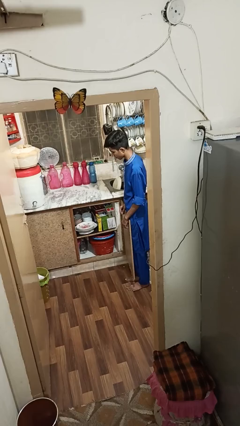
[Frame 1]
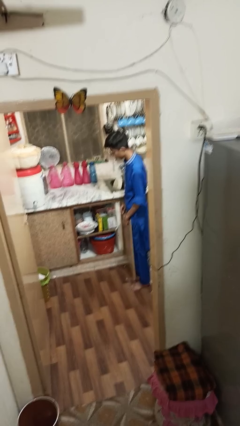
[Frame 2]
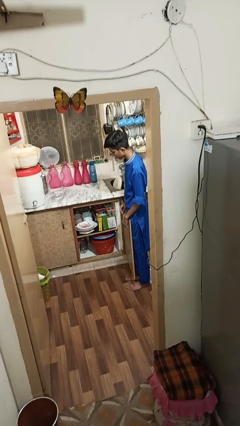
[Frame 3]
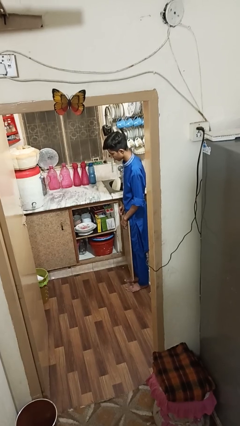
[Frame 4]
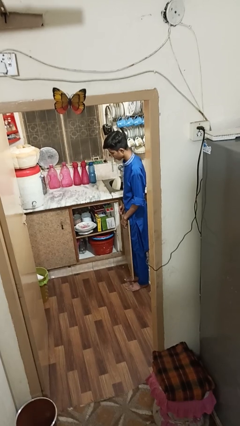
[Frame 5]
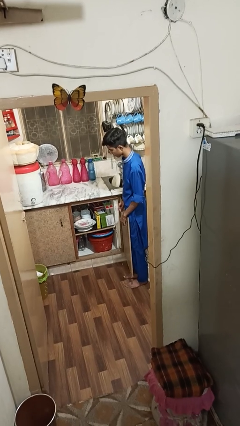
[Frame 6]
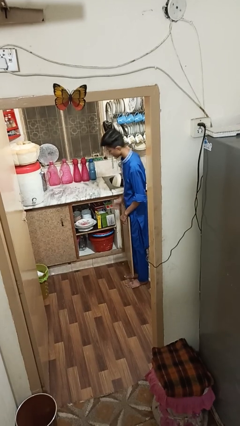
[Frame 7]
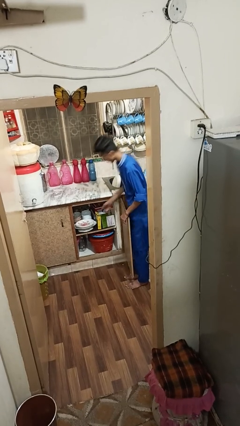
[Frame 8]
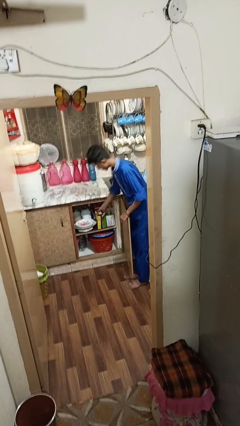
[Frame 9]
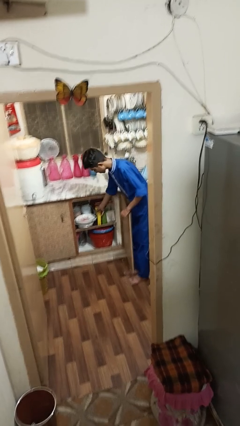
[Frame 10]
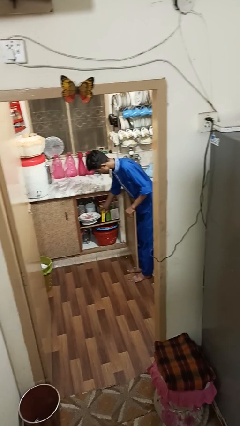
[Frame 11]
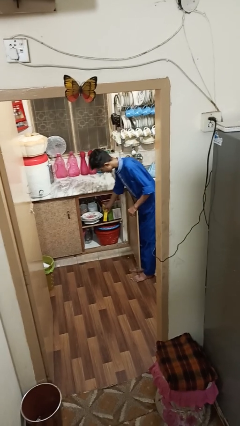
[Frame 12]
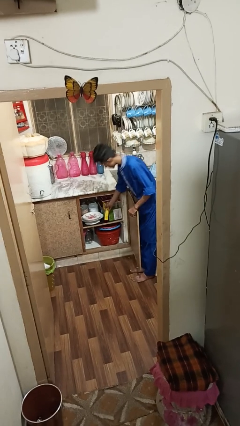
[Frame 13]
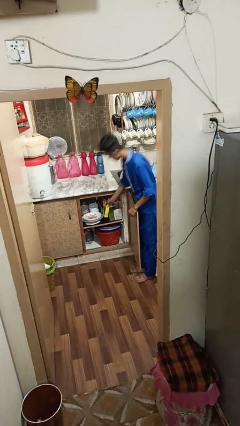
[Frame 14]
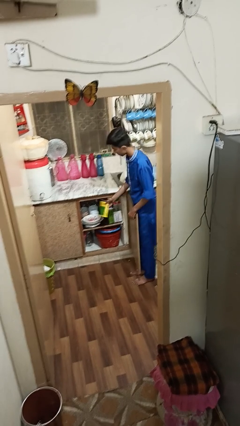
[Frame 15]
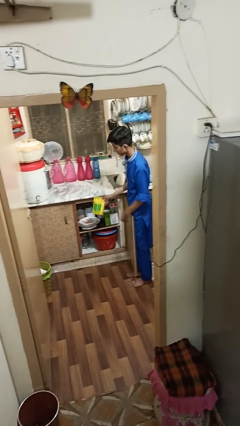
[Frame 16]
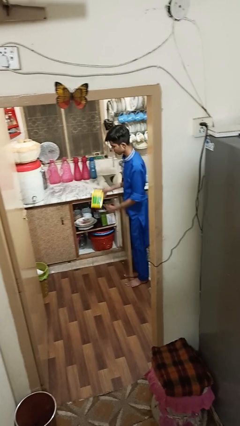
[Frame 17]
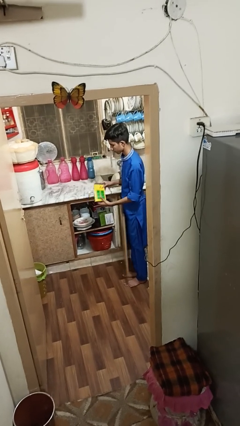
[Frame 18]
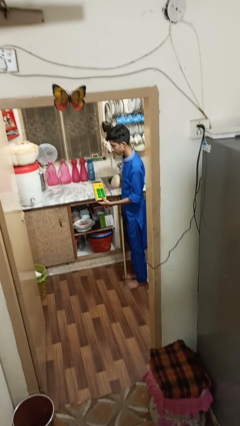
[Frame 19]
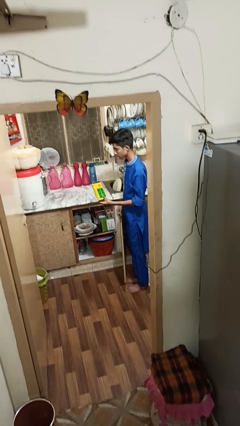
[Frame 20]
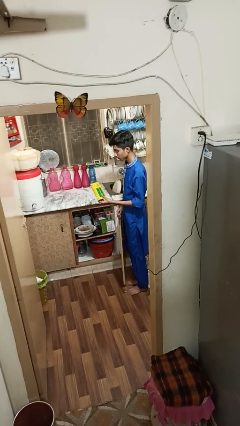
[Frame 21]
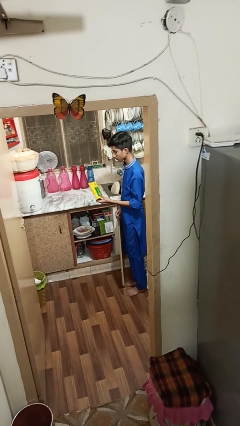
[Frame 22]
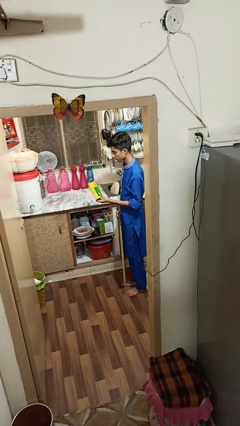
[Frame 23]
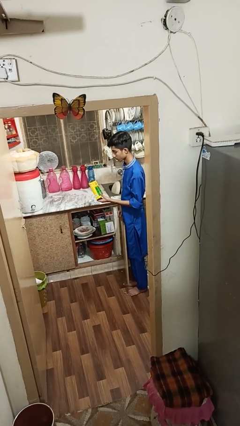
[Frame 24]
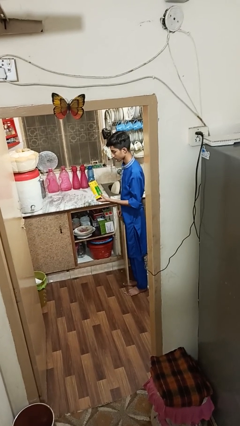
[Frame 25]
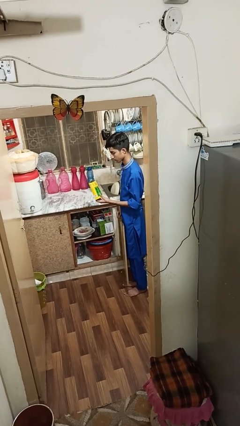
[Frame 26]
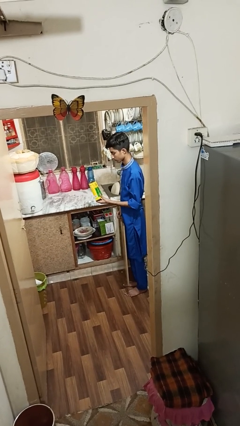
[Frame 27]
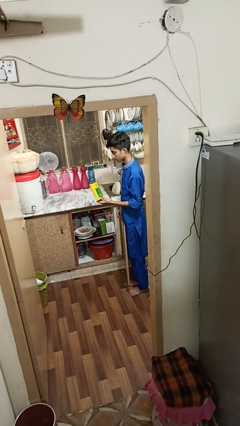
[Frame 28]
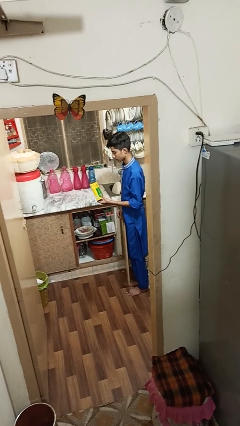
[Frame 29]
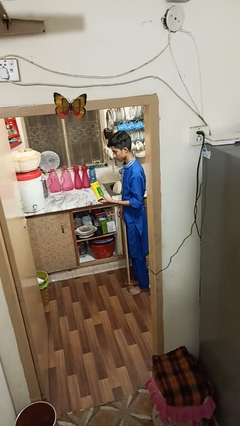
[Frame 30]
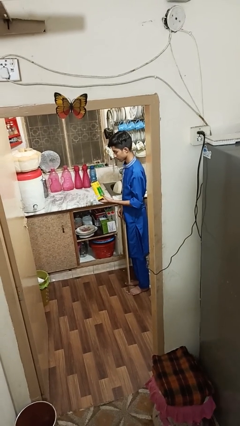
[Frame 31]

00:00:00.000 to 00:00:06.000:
person takes object from cabinet

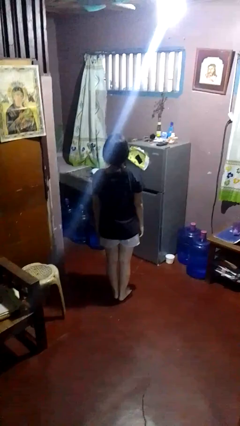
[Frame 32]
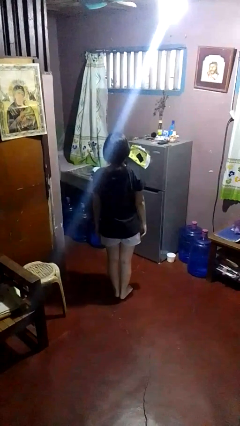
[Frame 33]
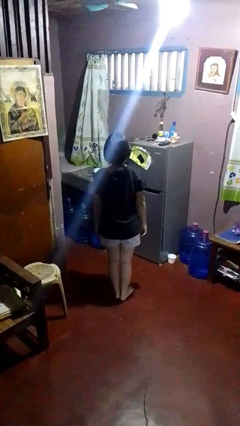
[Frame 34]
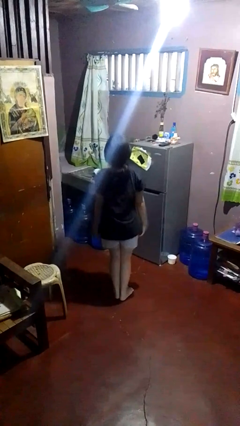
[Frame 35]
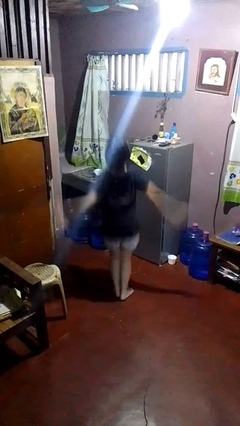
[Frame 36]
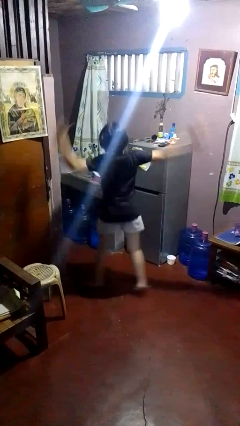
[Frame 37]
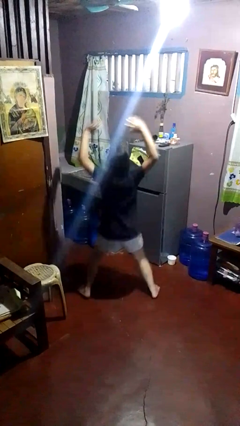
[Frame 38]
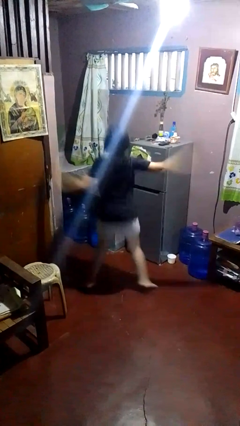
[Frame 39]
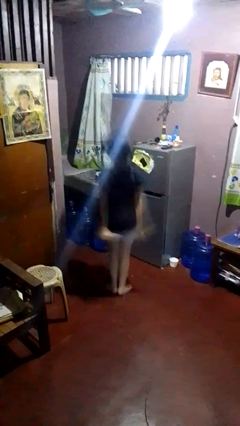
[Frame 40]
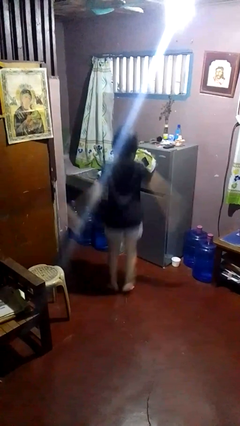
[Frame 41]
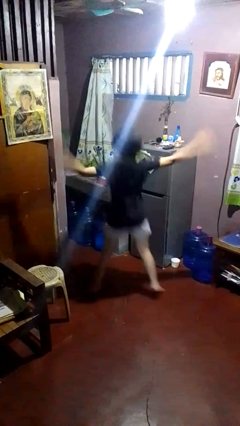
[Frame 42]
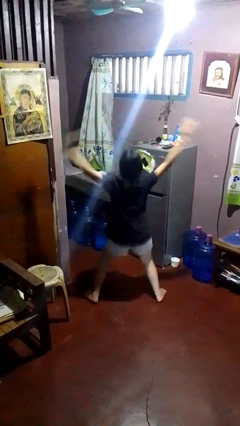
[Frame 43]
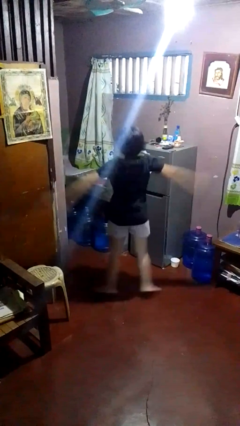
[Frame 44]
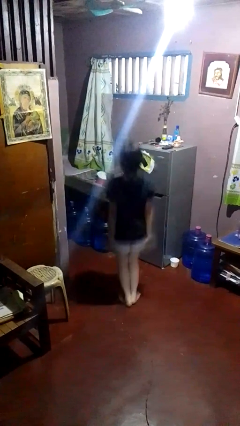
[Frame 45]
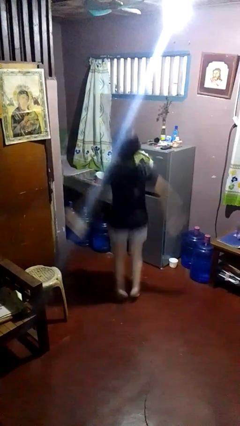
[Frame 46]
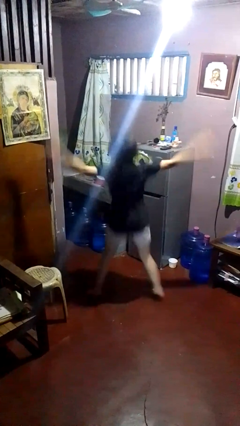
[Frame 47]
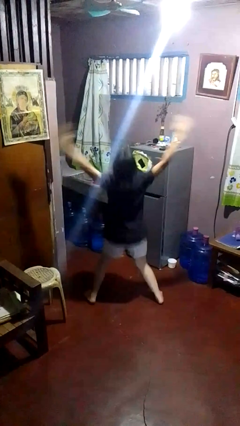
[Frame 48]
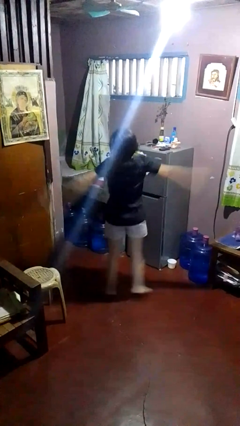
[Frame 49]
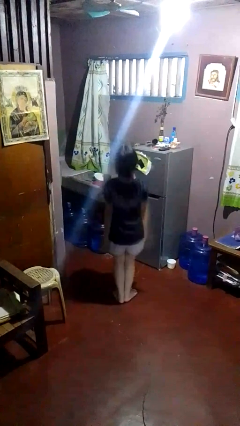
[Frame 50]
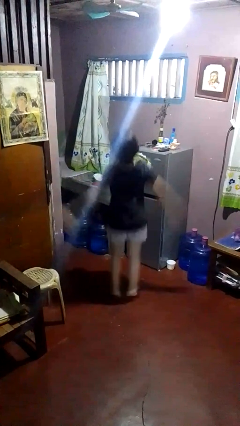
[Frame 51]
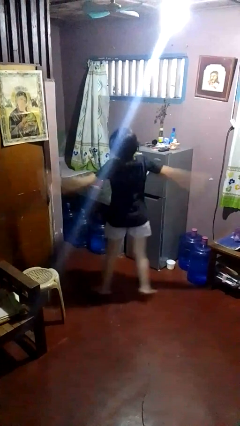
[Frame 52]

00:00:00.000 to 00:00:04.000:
person exercises with jumping jacks

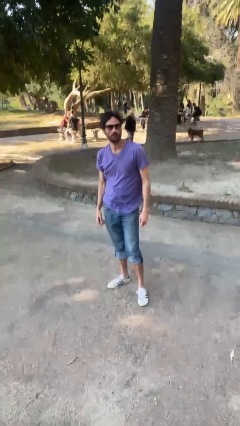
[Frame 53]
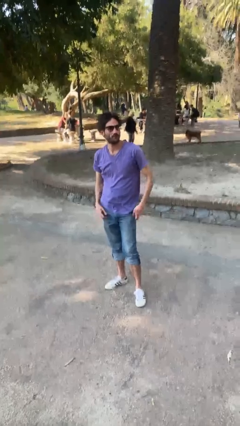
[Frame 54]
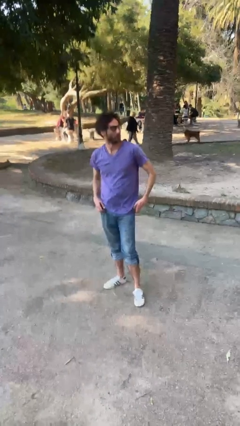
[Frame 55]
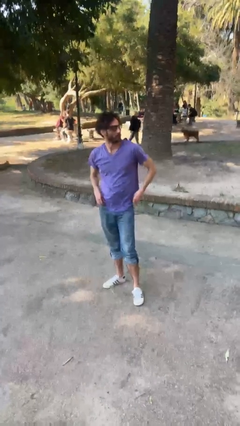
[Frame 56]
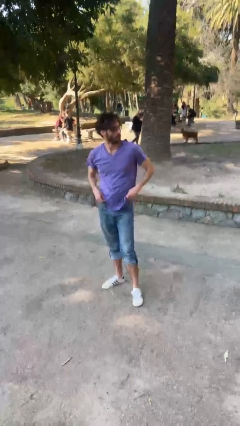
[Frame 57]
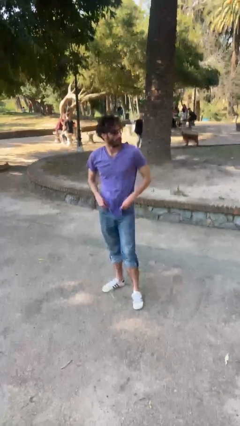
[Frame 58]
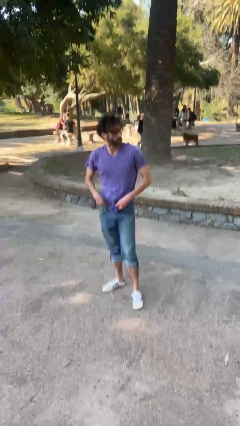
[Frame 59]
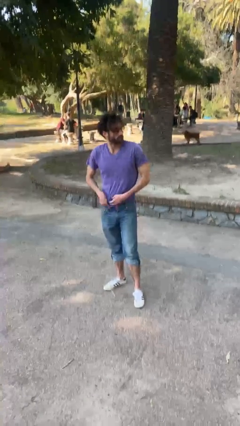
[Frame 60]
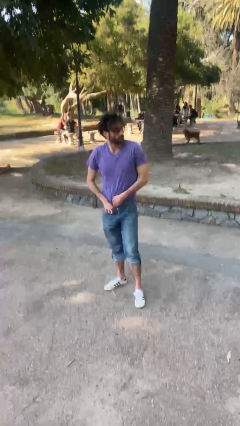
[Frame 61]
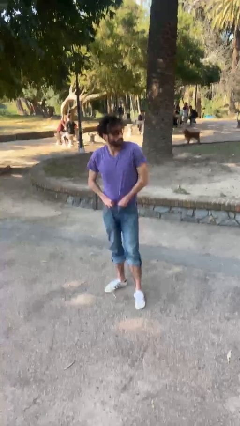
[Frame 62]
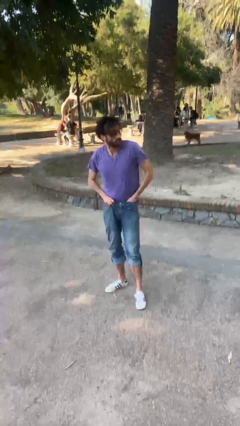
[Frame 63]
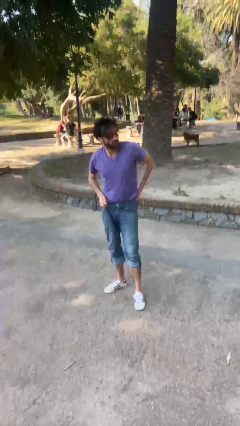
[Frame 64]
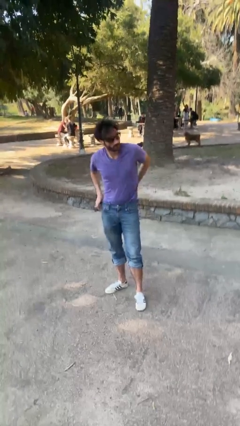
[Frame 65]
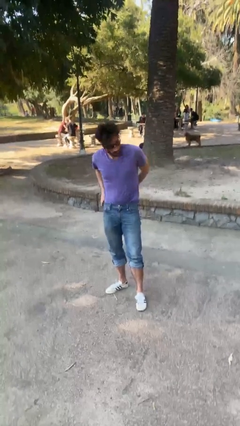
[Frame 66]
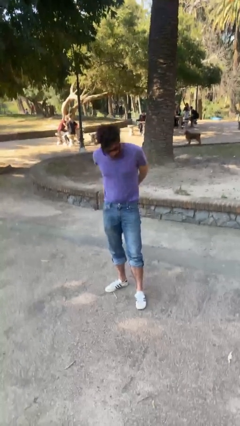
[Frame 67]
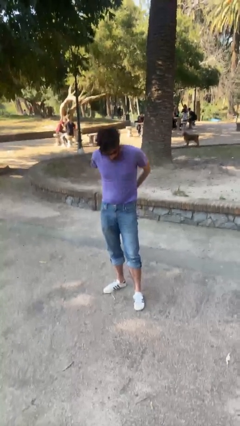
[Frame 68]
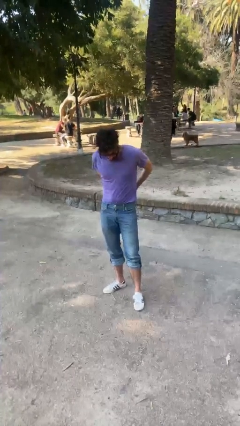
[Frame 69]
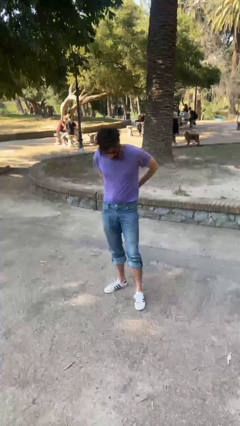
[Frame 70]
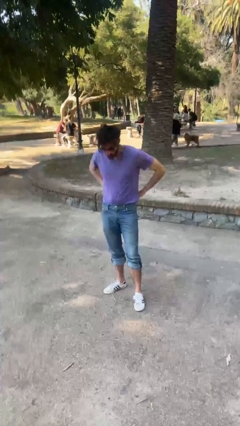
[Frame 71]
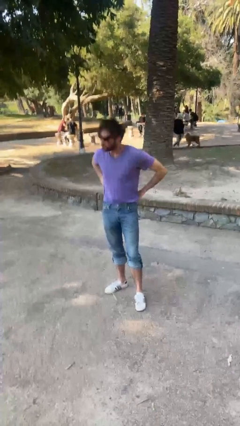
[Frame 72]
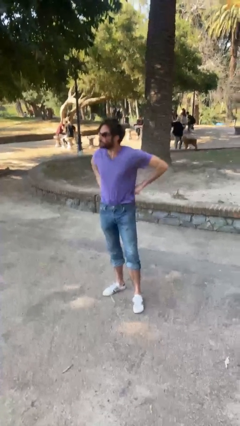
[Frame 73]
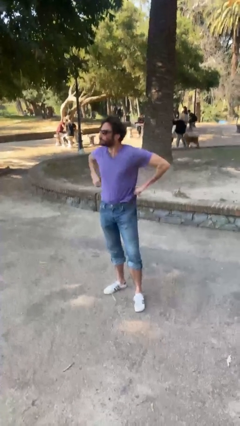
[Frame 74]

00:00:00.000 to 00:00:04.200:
person tucks in shirt

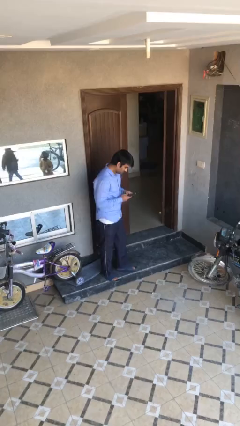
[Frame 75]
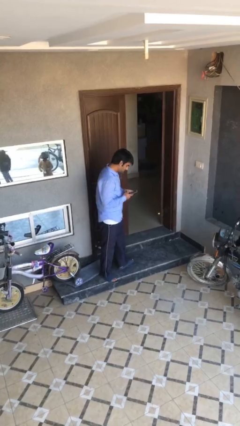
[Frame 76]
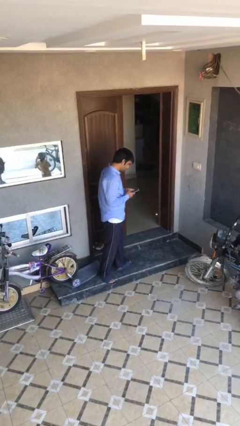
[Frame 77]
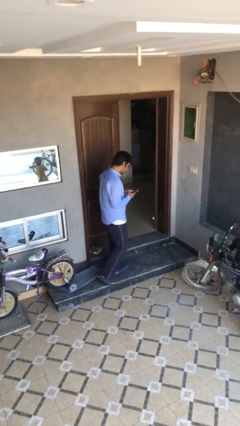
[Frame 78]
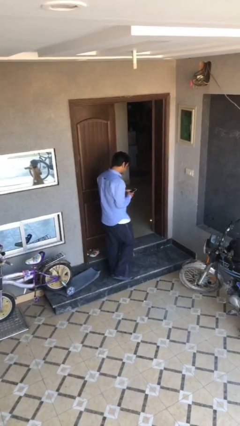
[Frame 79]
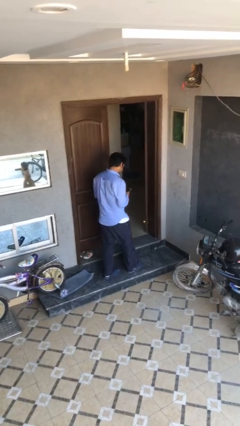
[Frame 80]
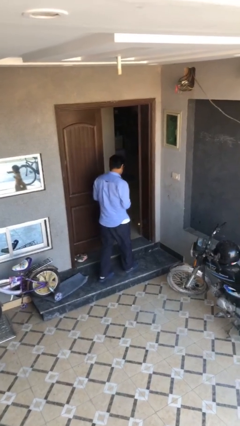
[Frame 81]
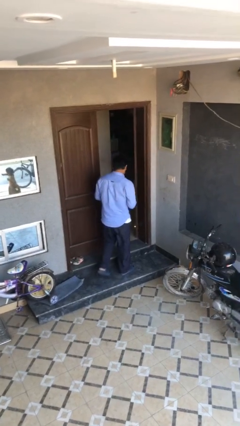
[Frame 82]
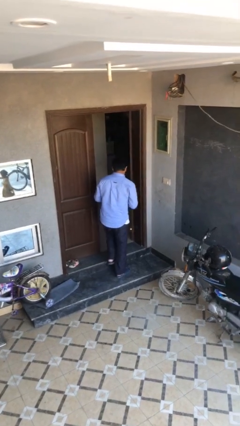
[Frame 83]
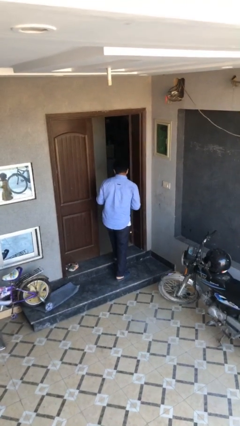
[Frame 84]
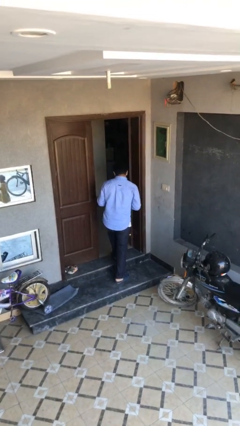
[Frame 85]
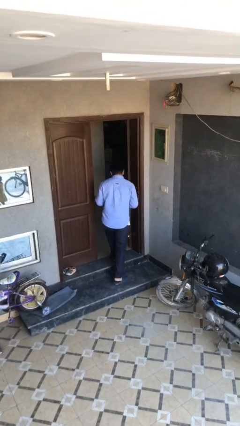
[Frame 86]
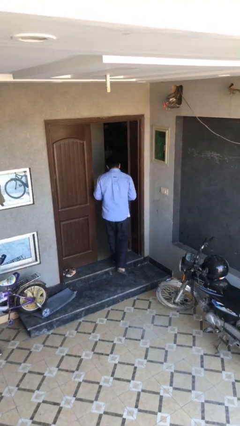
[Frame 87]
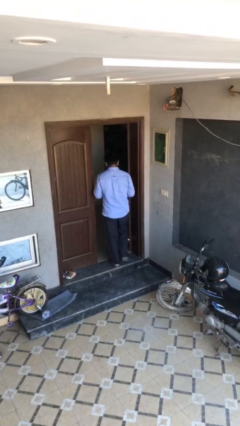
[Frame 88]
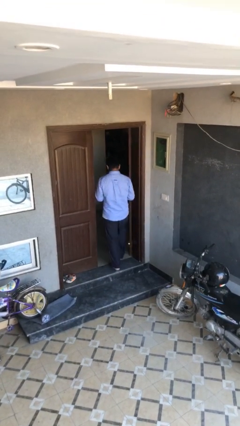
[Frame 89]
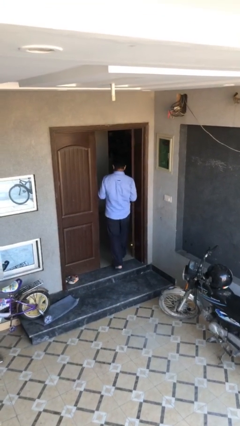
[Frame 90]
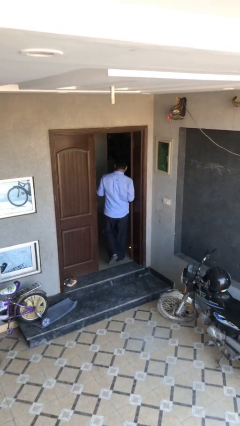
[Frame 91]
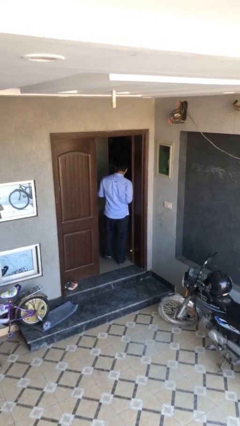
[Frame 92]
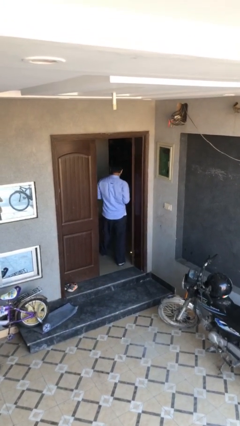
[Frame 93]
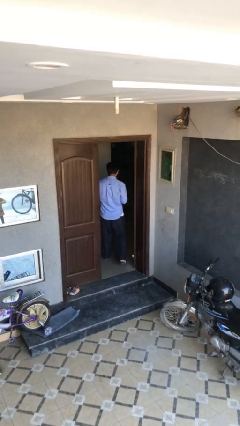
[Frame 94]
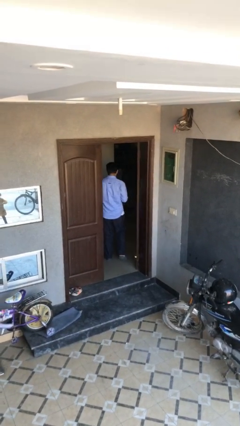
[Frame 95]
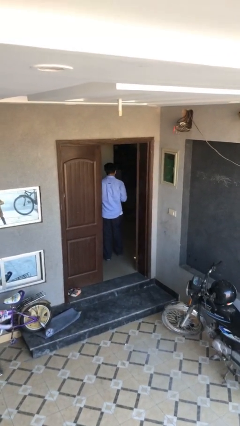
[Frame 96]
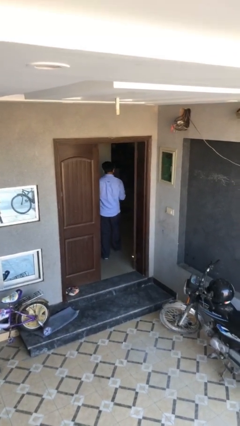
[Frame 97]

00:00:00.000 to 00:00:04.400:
person exits scene through structure
